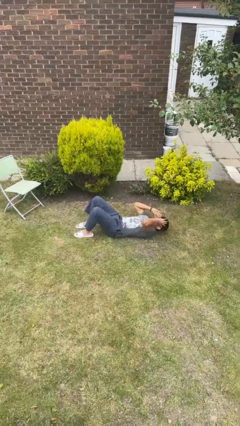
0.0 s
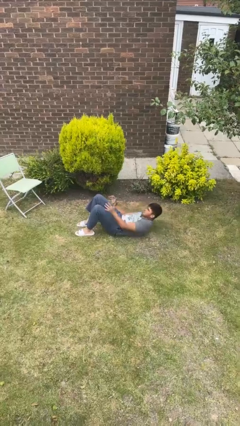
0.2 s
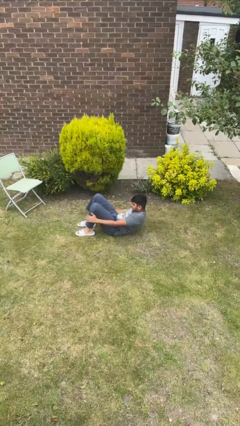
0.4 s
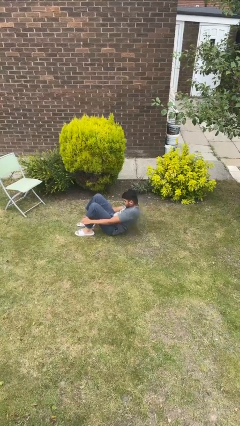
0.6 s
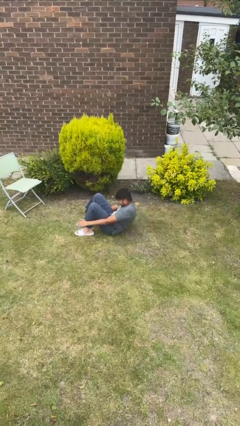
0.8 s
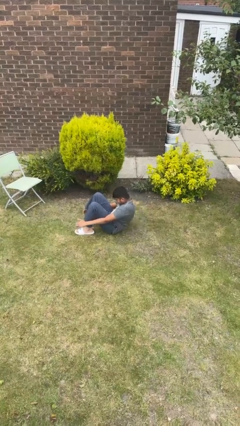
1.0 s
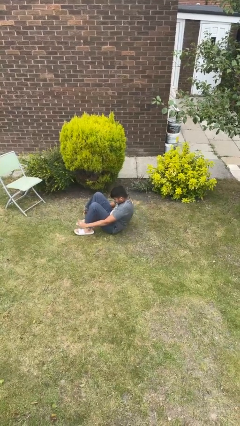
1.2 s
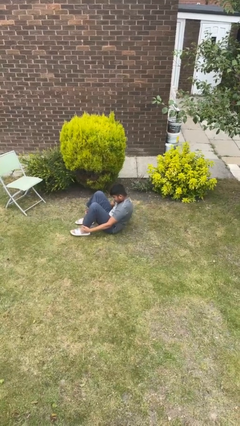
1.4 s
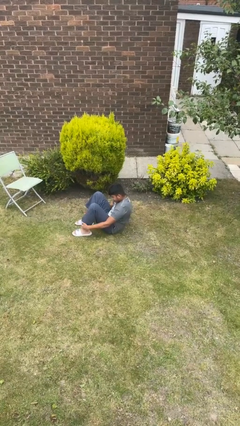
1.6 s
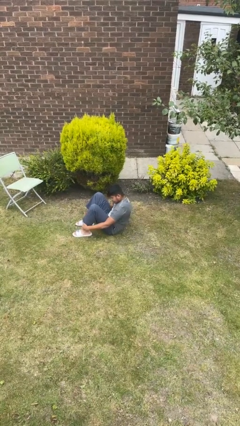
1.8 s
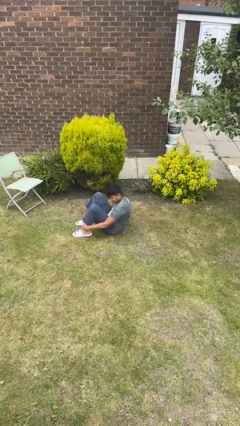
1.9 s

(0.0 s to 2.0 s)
person exercises with situp

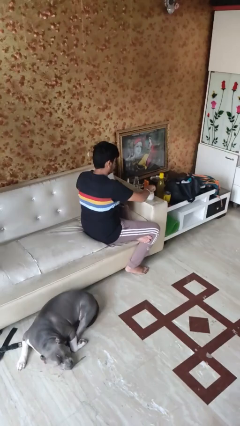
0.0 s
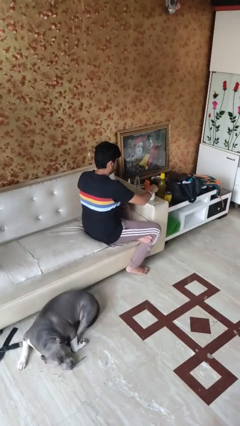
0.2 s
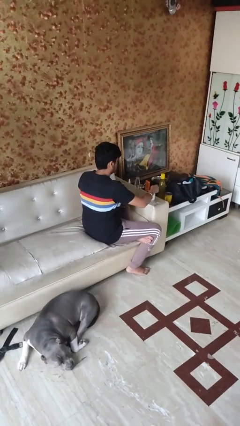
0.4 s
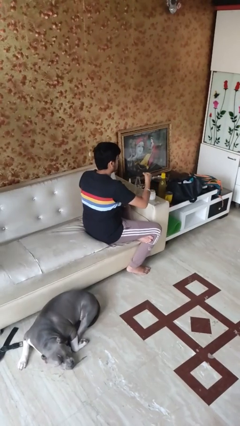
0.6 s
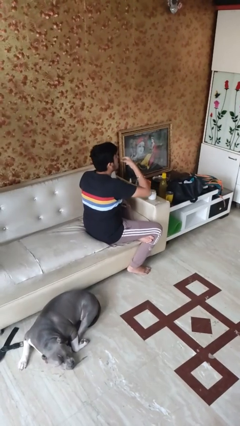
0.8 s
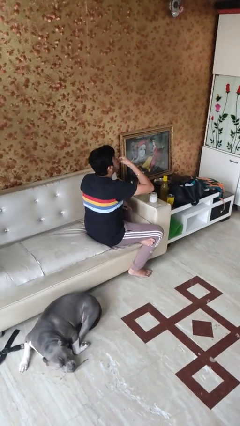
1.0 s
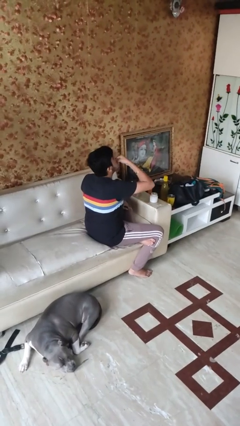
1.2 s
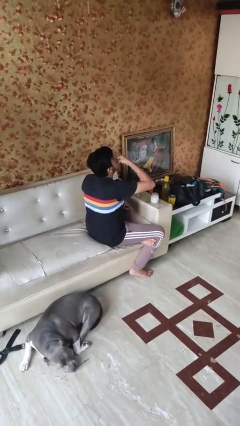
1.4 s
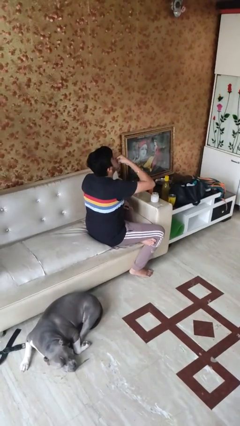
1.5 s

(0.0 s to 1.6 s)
person takes medicine pills

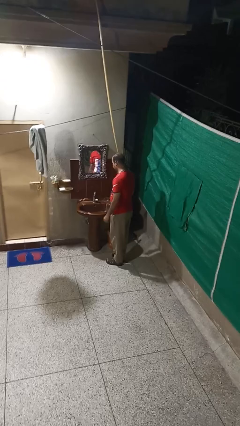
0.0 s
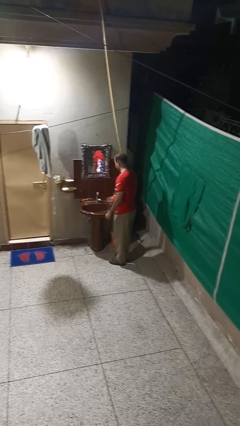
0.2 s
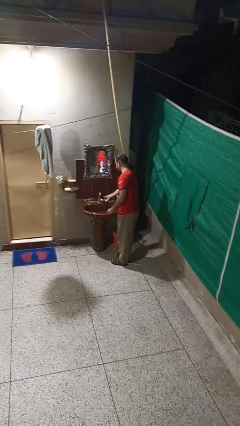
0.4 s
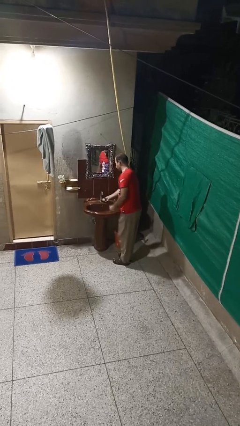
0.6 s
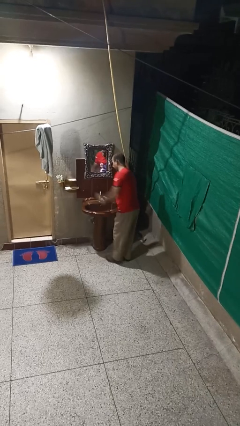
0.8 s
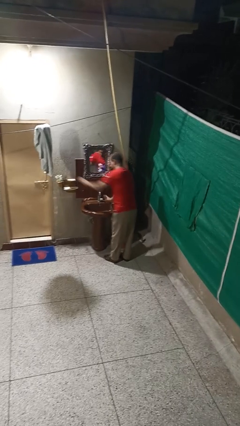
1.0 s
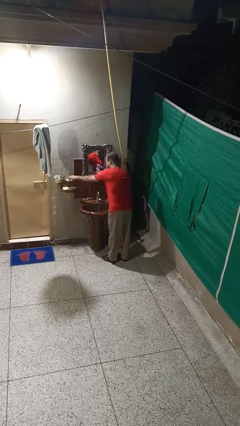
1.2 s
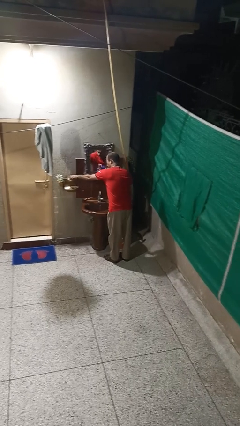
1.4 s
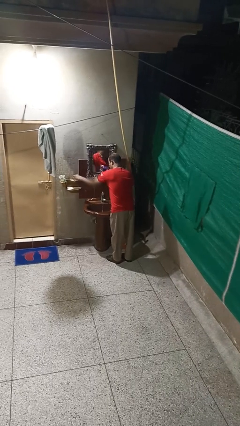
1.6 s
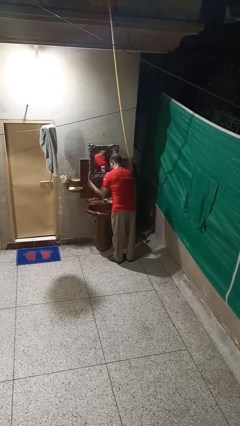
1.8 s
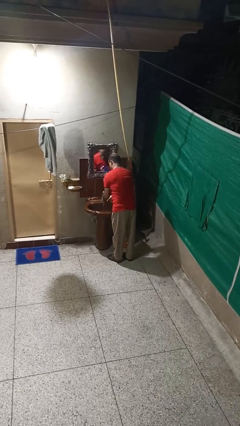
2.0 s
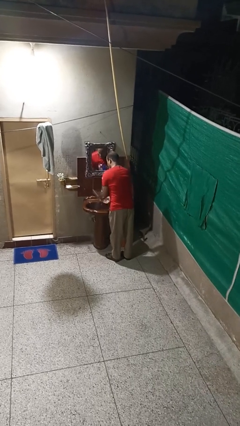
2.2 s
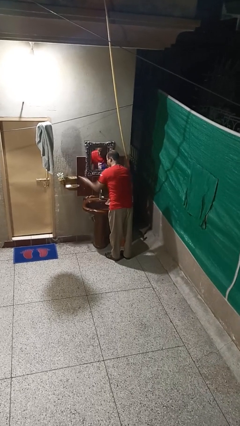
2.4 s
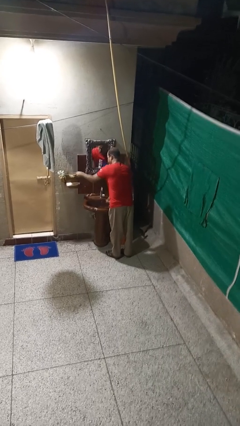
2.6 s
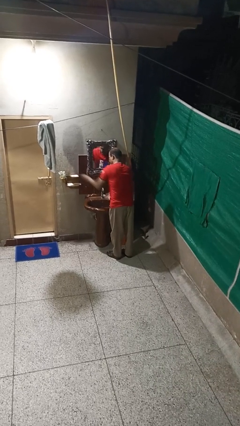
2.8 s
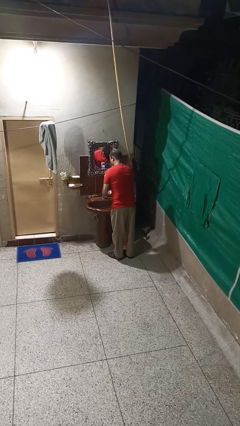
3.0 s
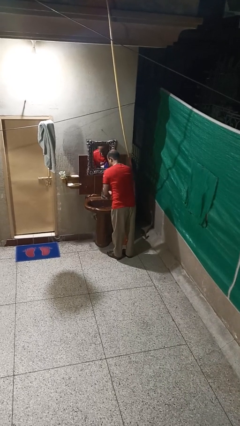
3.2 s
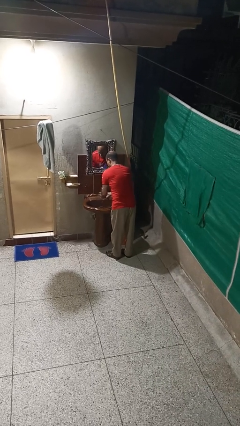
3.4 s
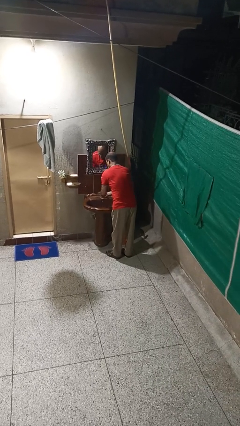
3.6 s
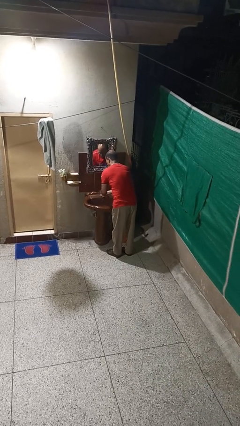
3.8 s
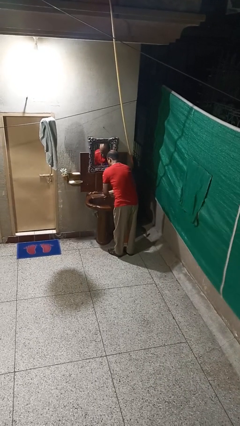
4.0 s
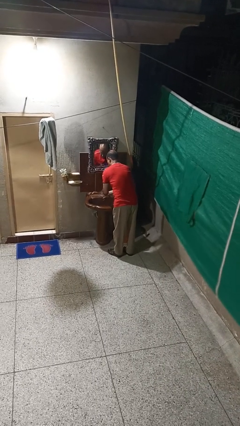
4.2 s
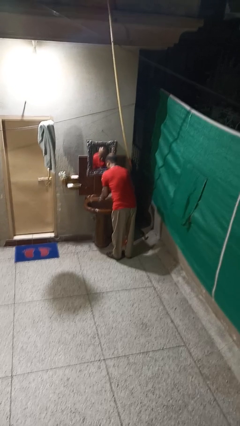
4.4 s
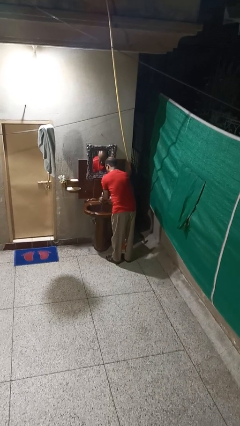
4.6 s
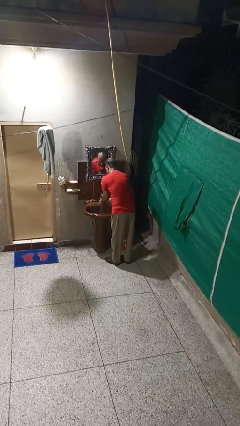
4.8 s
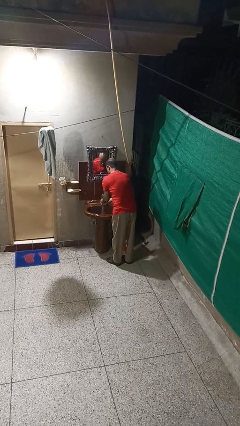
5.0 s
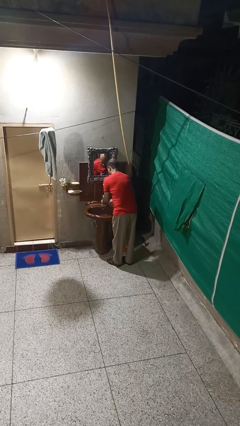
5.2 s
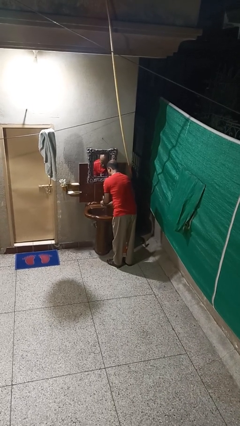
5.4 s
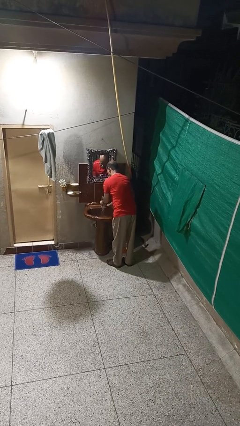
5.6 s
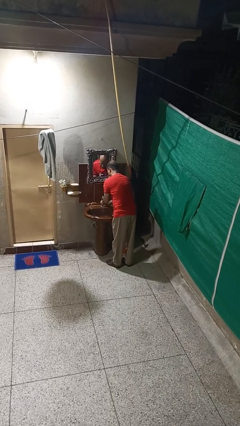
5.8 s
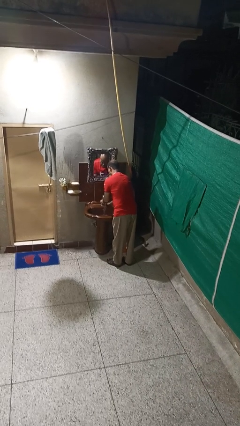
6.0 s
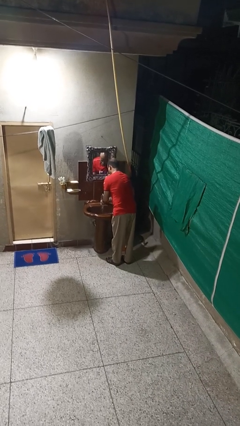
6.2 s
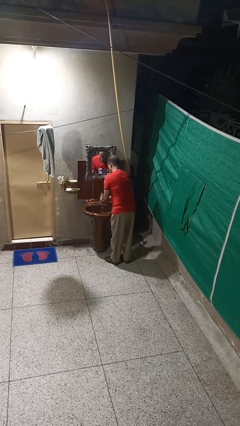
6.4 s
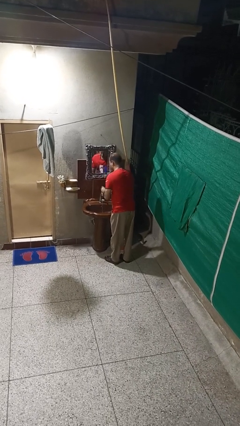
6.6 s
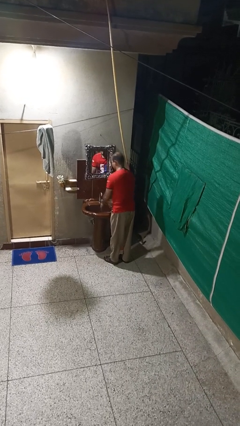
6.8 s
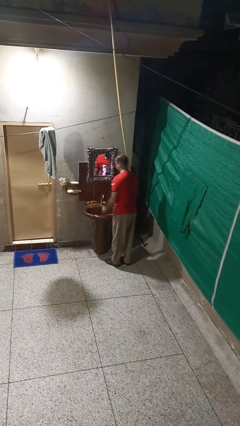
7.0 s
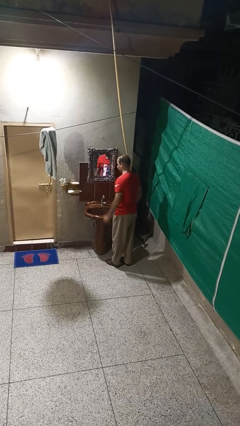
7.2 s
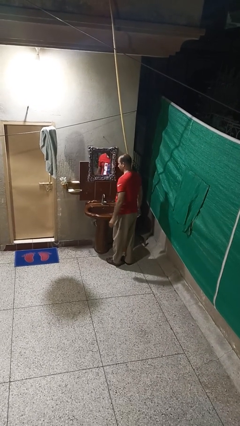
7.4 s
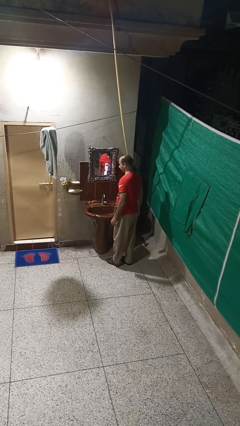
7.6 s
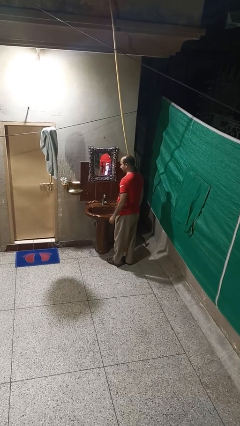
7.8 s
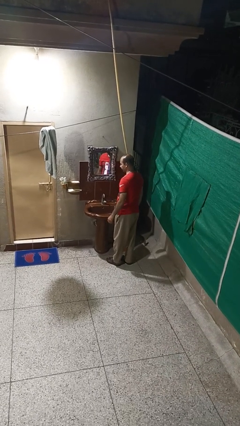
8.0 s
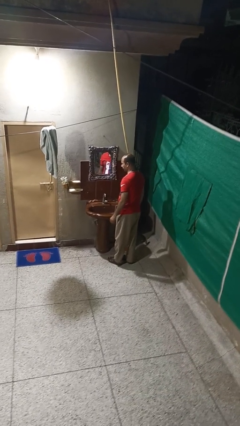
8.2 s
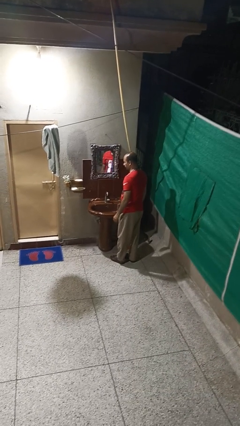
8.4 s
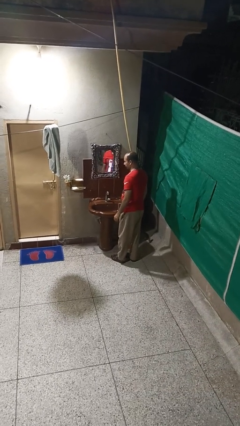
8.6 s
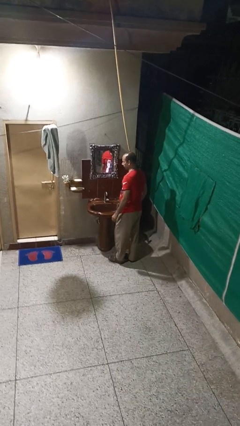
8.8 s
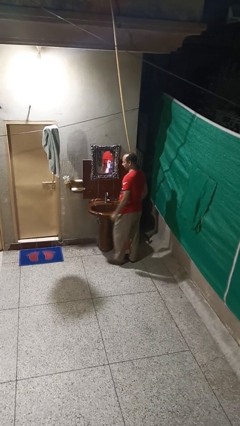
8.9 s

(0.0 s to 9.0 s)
person washes hands

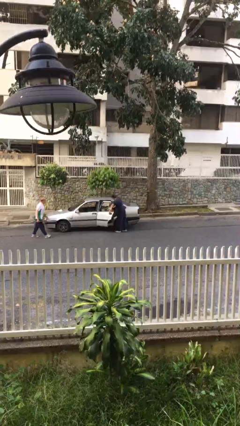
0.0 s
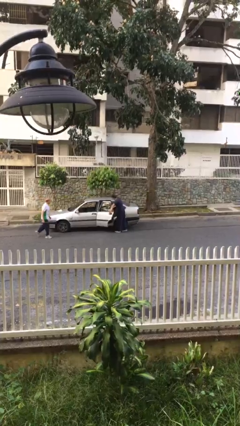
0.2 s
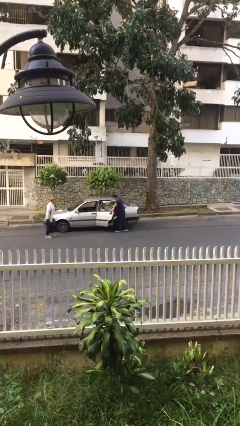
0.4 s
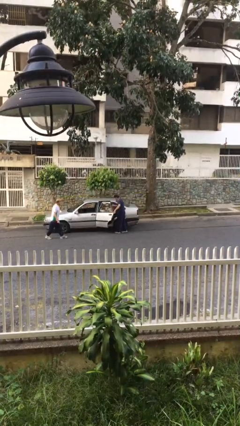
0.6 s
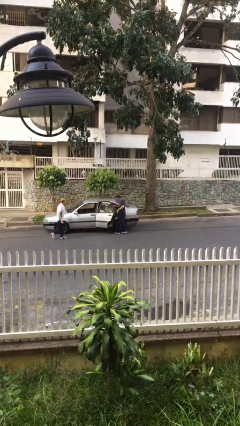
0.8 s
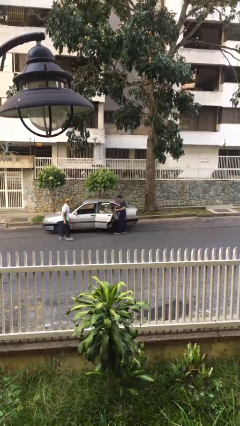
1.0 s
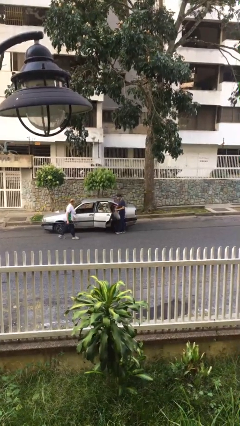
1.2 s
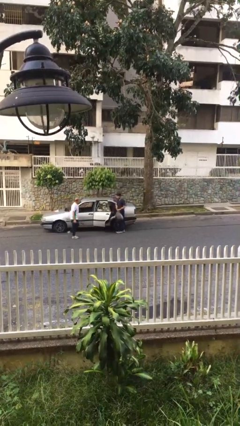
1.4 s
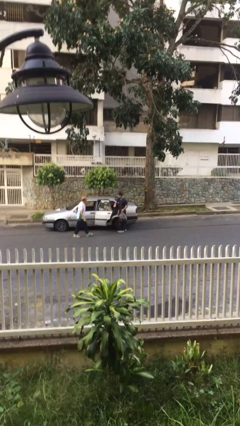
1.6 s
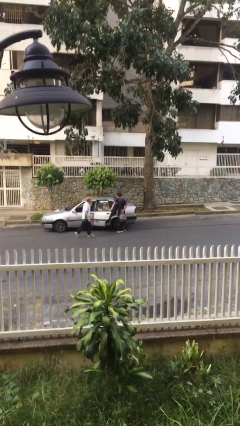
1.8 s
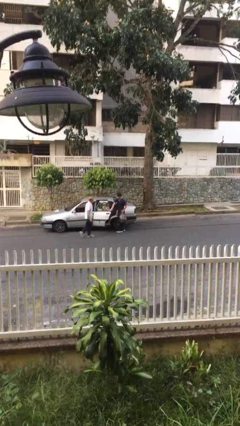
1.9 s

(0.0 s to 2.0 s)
person unloads car

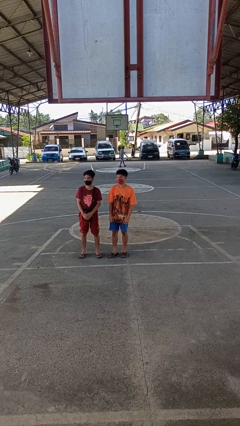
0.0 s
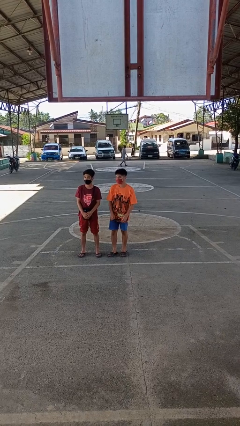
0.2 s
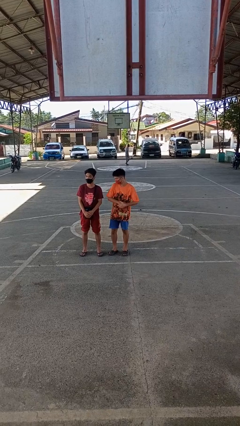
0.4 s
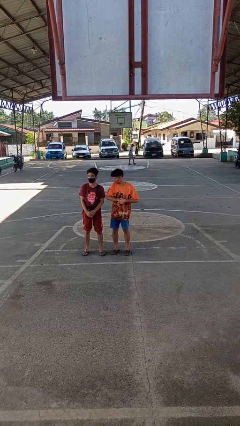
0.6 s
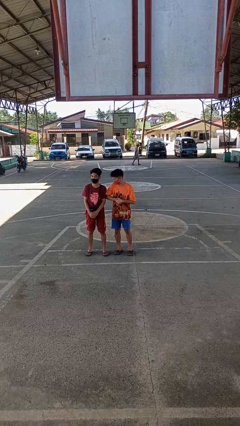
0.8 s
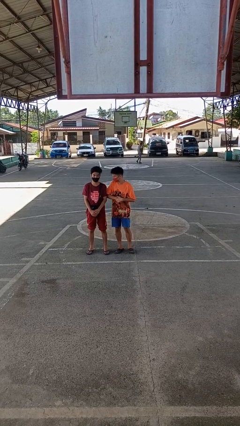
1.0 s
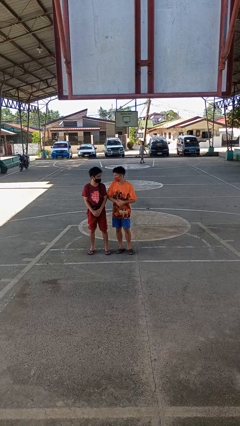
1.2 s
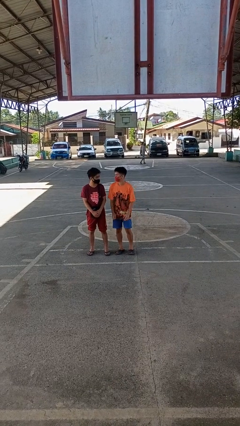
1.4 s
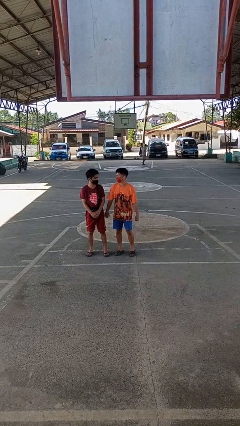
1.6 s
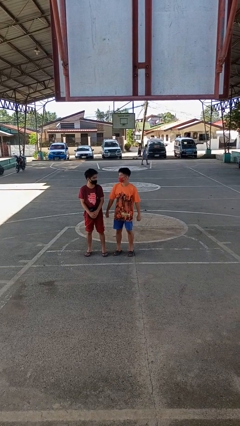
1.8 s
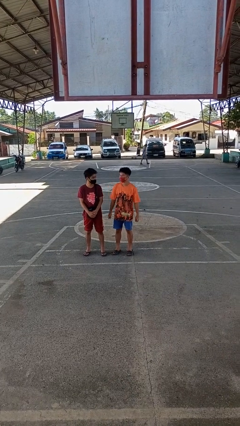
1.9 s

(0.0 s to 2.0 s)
person nudges person with elbow

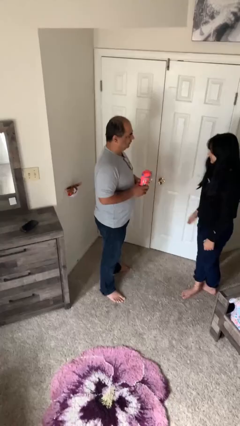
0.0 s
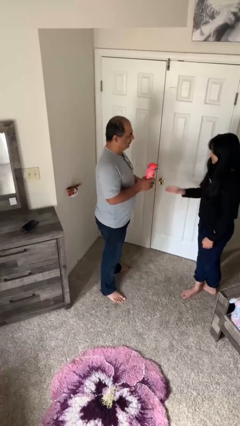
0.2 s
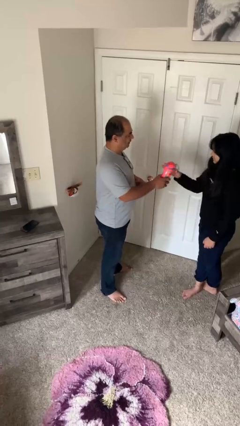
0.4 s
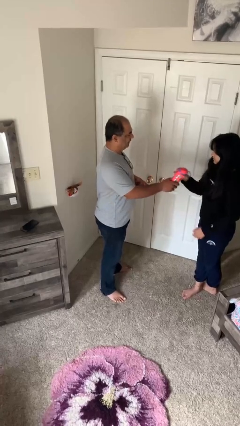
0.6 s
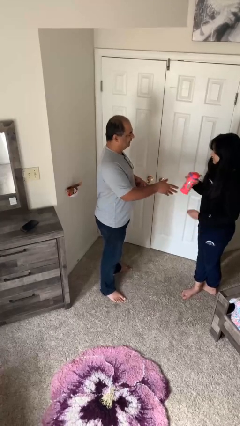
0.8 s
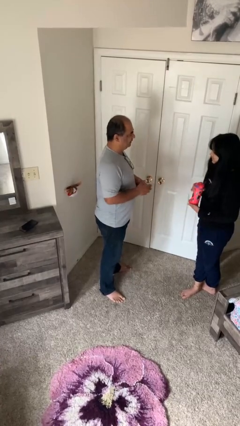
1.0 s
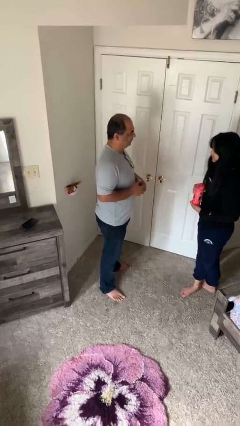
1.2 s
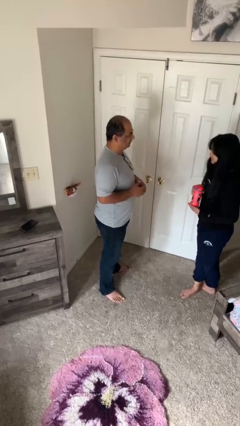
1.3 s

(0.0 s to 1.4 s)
person transfers object to person
